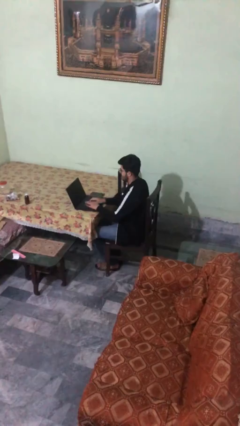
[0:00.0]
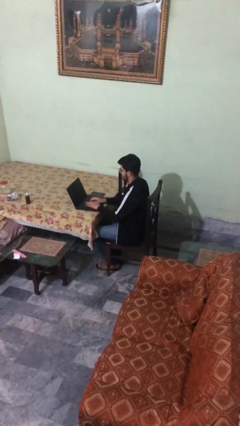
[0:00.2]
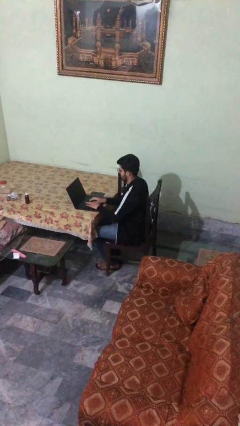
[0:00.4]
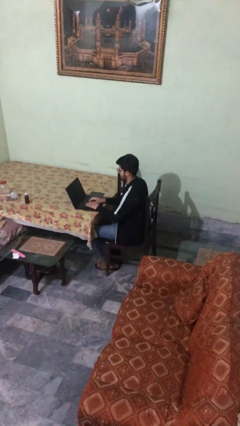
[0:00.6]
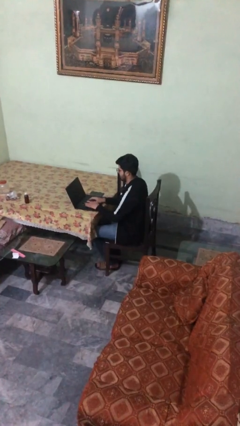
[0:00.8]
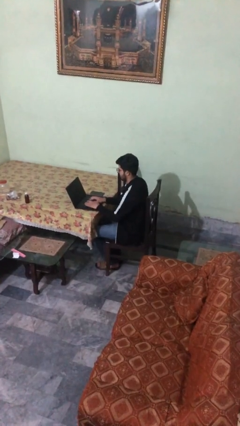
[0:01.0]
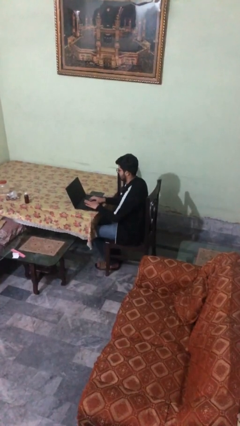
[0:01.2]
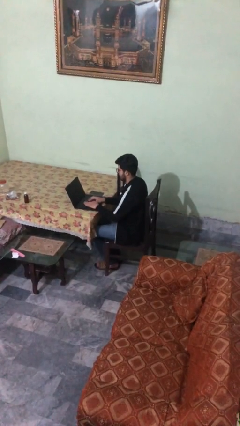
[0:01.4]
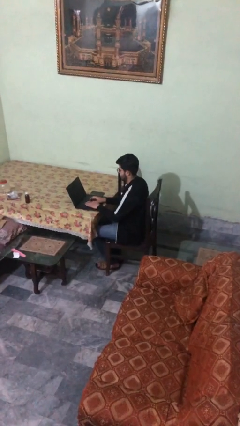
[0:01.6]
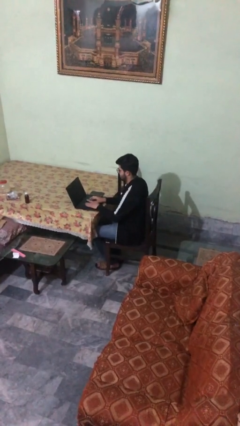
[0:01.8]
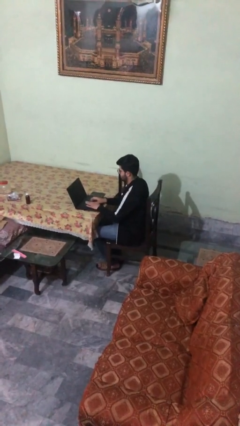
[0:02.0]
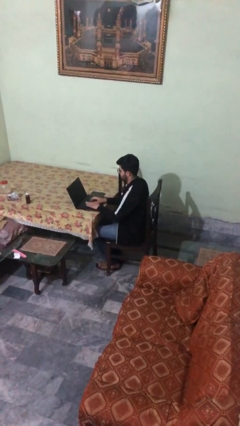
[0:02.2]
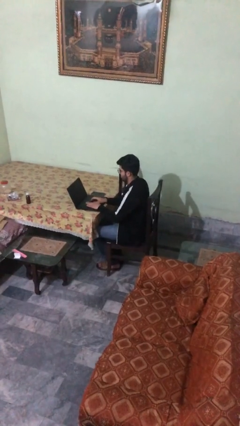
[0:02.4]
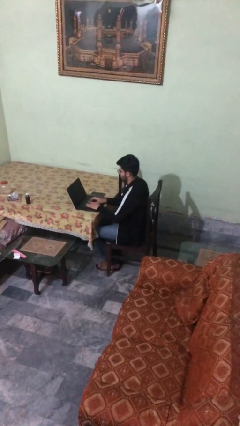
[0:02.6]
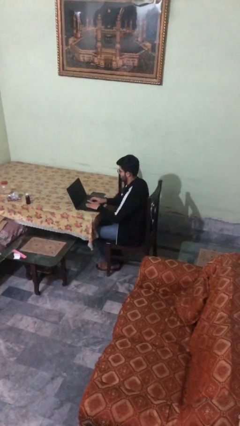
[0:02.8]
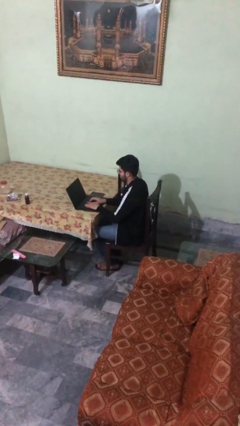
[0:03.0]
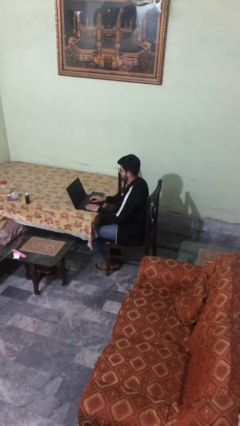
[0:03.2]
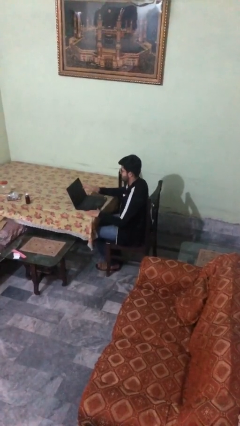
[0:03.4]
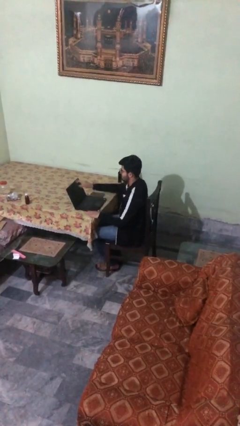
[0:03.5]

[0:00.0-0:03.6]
person interacts with laptop

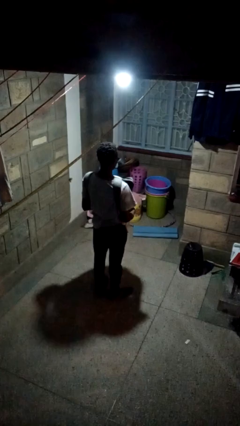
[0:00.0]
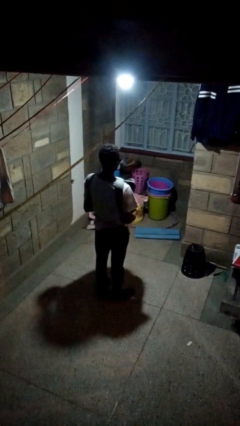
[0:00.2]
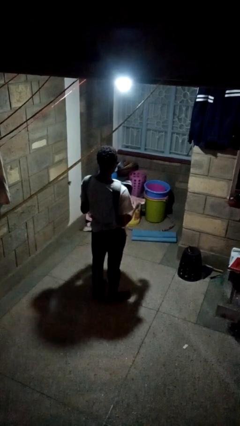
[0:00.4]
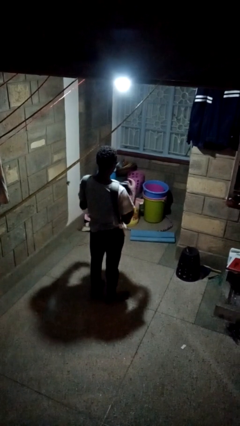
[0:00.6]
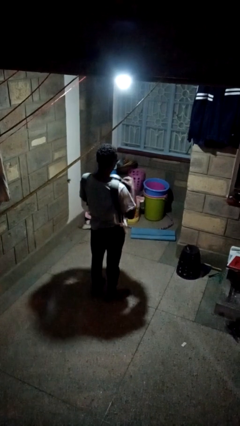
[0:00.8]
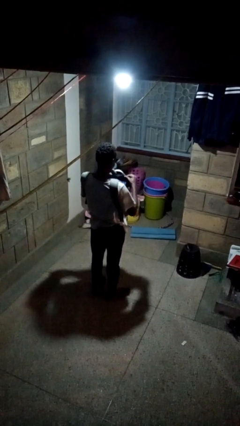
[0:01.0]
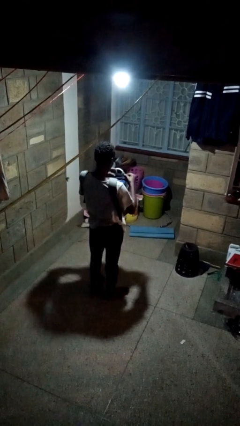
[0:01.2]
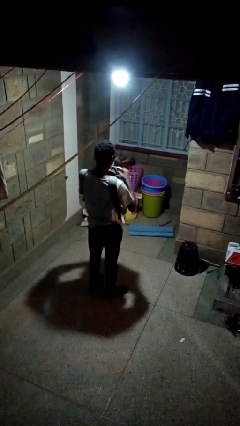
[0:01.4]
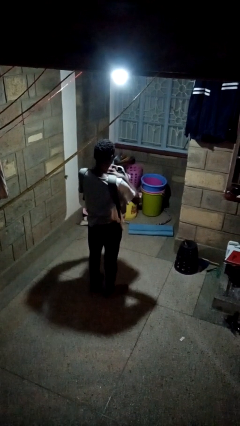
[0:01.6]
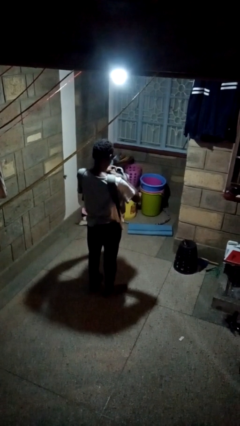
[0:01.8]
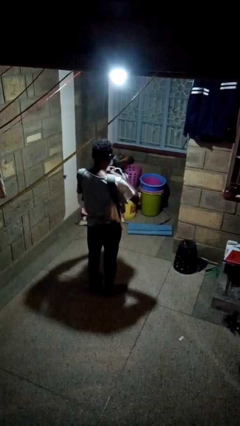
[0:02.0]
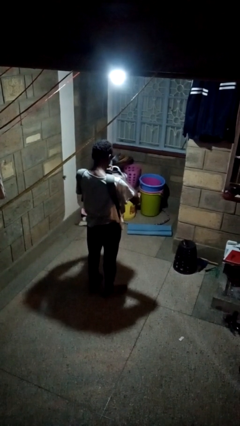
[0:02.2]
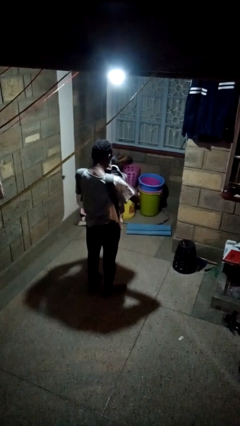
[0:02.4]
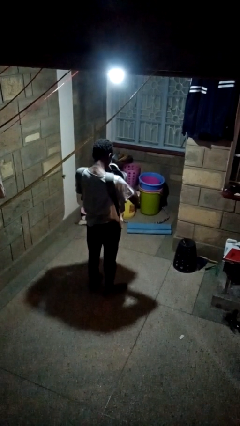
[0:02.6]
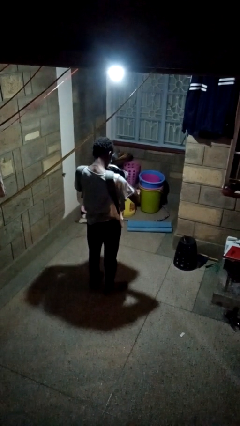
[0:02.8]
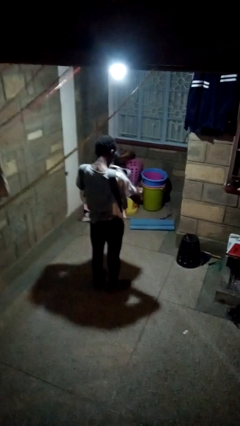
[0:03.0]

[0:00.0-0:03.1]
person searches in backpack

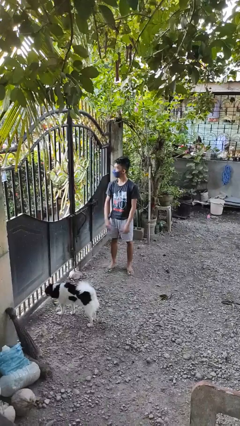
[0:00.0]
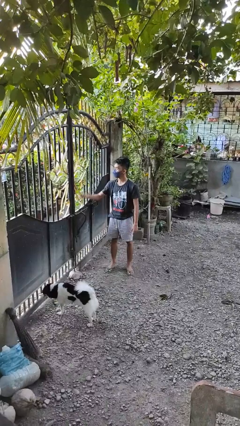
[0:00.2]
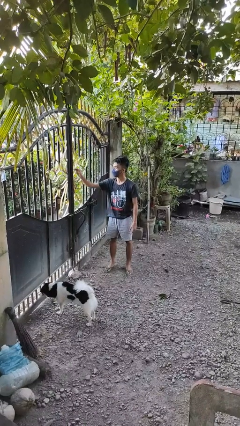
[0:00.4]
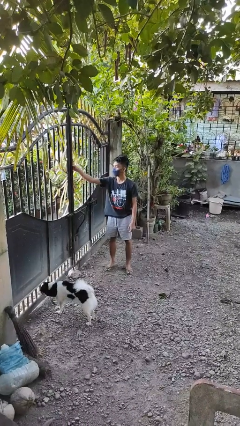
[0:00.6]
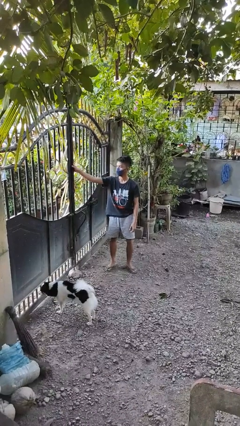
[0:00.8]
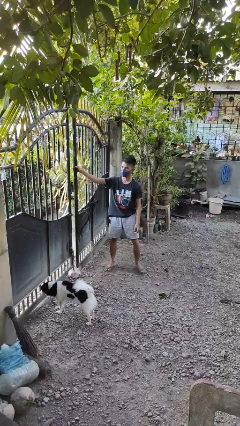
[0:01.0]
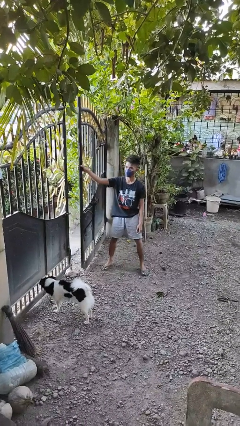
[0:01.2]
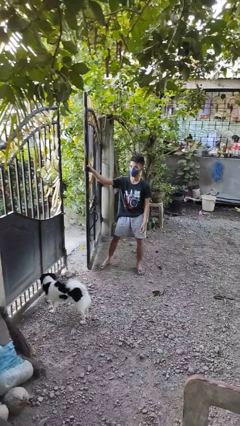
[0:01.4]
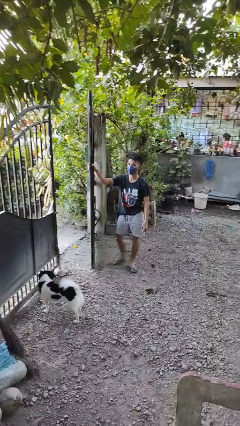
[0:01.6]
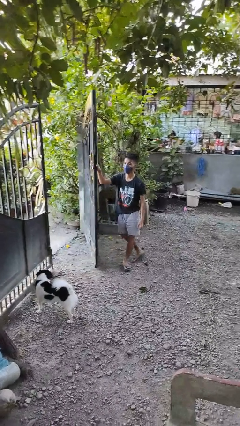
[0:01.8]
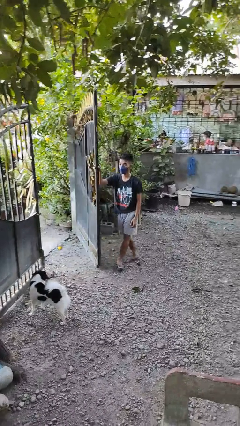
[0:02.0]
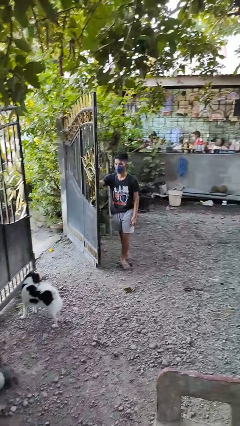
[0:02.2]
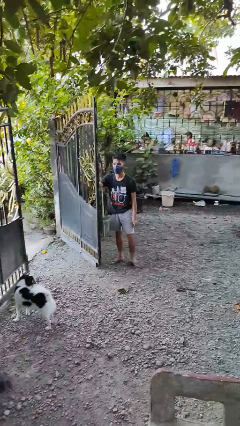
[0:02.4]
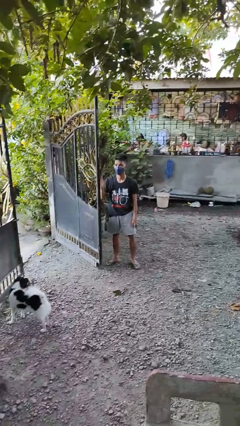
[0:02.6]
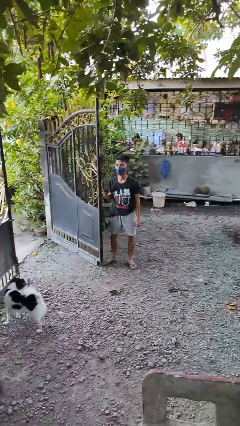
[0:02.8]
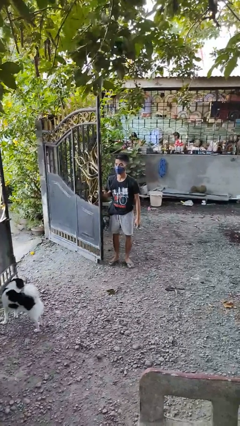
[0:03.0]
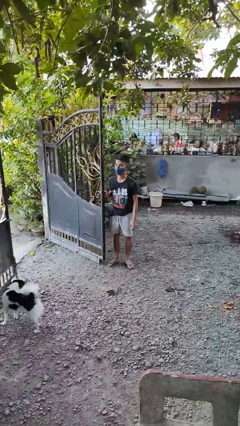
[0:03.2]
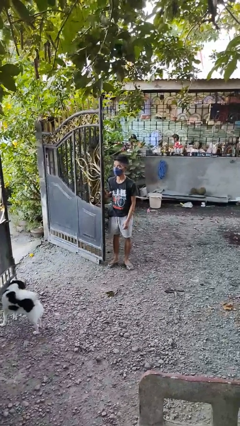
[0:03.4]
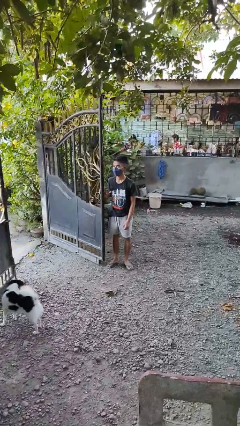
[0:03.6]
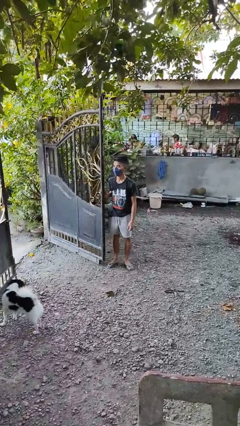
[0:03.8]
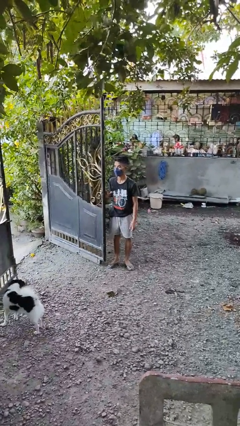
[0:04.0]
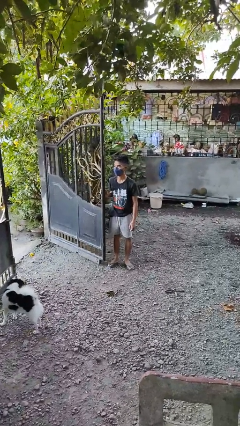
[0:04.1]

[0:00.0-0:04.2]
person opens gate

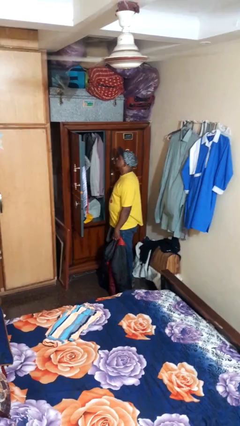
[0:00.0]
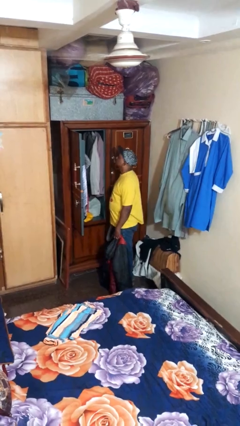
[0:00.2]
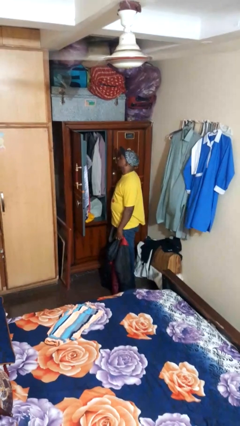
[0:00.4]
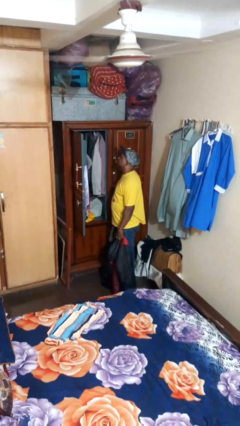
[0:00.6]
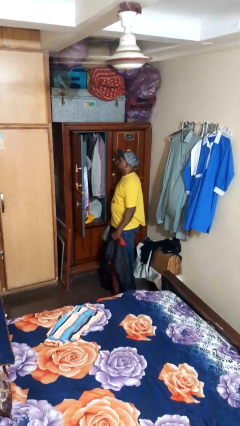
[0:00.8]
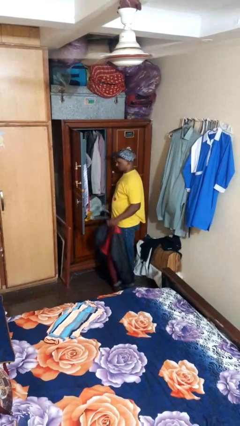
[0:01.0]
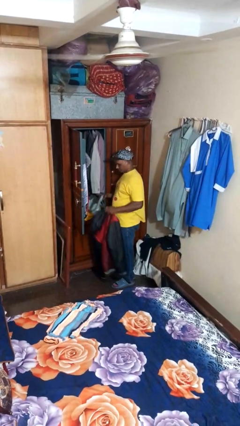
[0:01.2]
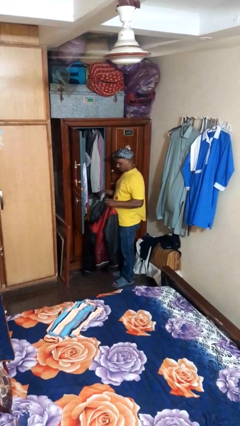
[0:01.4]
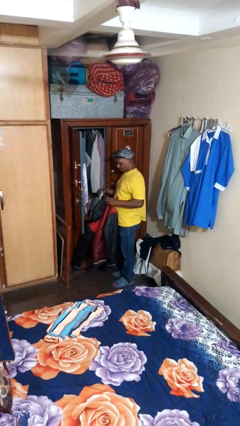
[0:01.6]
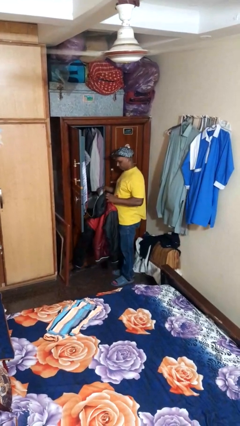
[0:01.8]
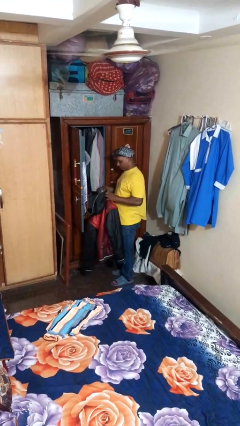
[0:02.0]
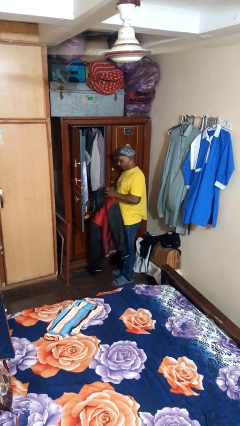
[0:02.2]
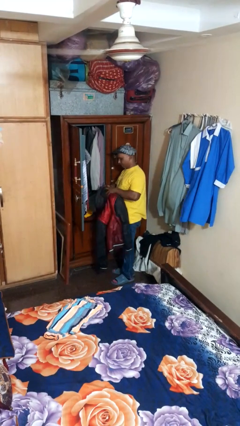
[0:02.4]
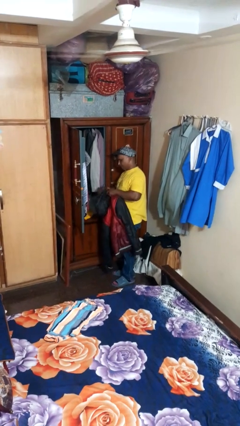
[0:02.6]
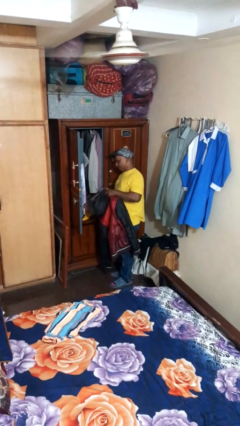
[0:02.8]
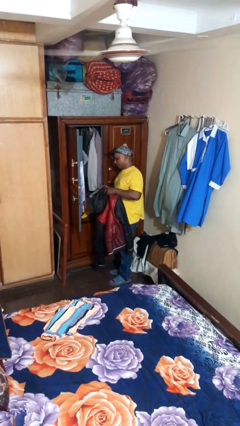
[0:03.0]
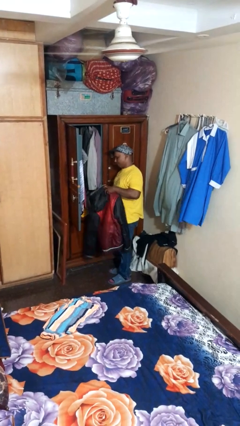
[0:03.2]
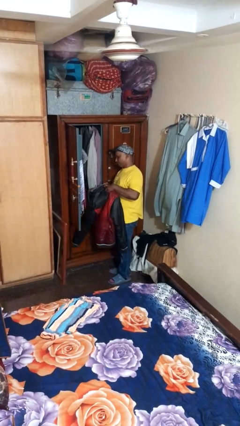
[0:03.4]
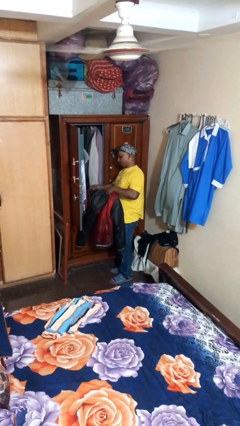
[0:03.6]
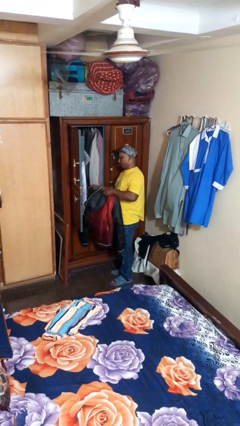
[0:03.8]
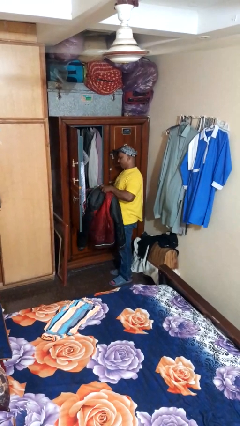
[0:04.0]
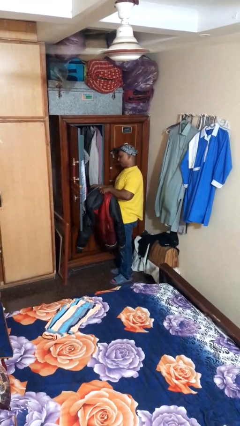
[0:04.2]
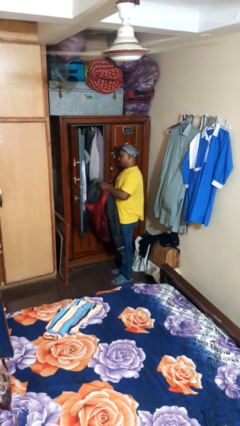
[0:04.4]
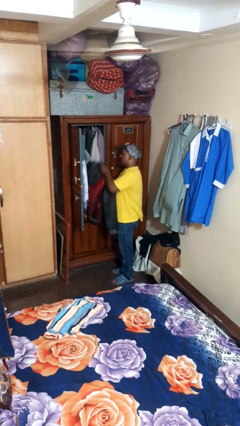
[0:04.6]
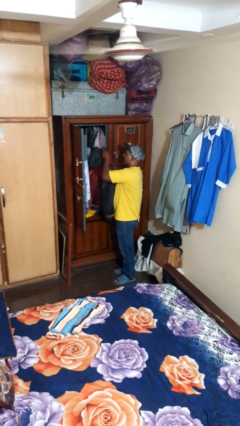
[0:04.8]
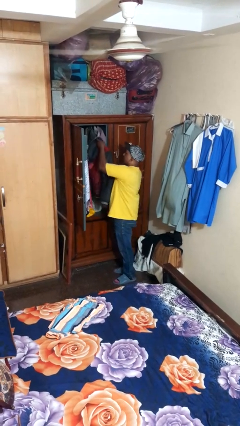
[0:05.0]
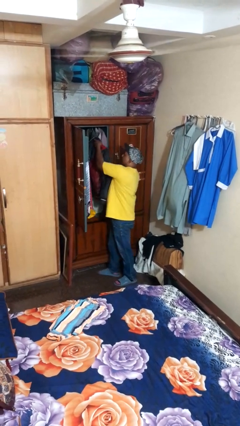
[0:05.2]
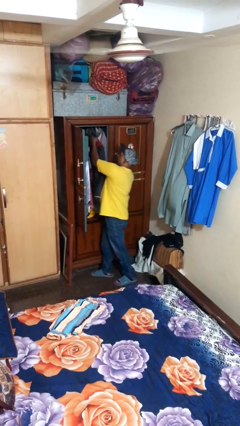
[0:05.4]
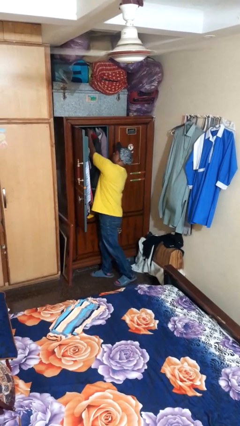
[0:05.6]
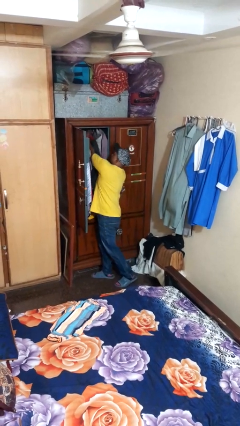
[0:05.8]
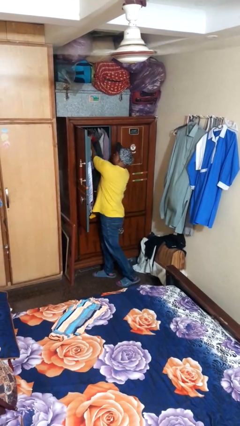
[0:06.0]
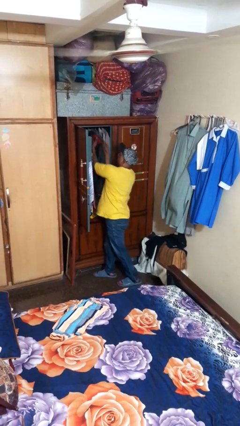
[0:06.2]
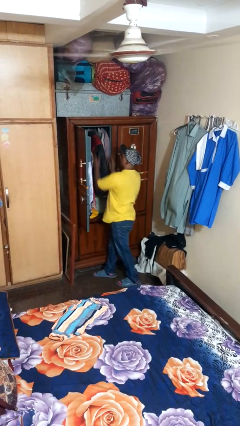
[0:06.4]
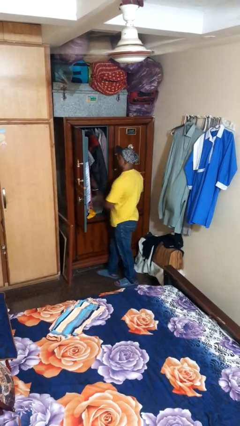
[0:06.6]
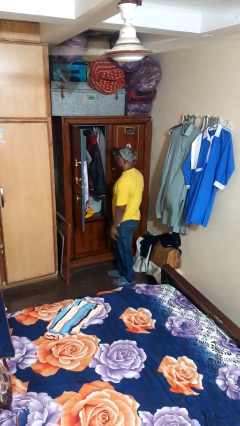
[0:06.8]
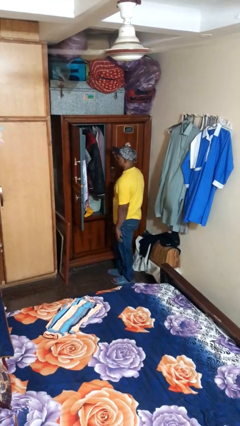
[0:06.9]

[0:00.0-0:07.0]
person puts clothes into closet

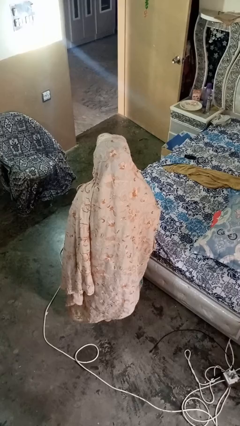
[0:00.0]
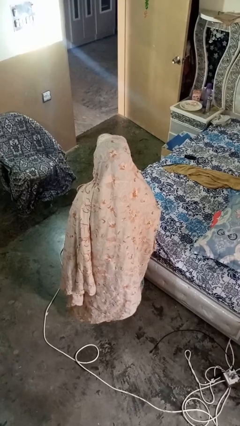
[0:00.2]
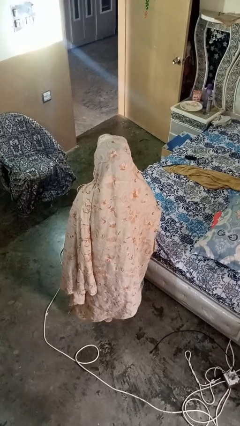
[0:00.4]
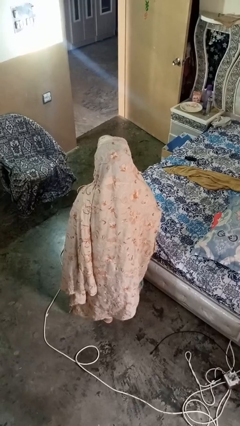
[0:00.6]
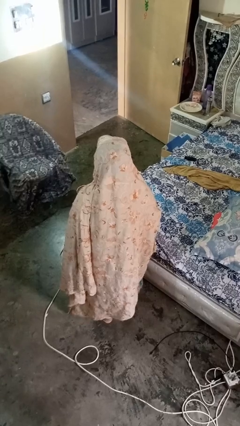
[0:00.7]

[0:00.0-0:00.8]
person picks up object from bed
